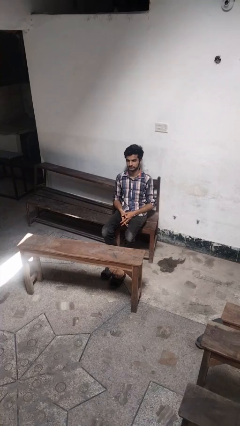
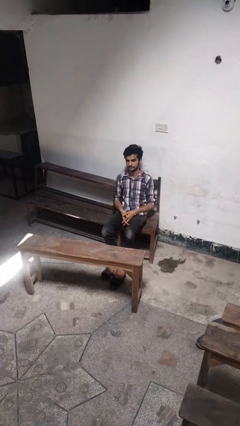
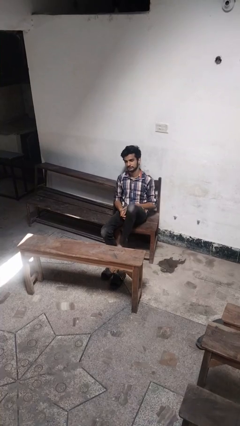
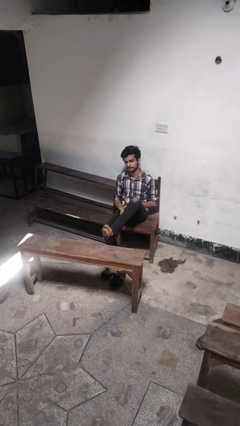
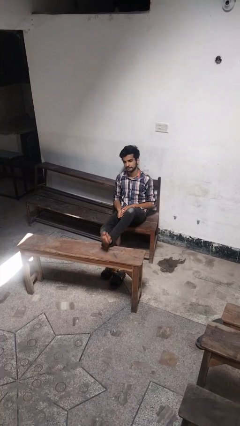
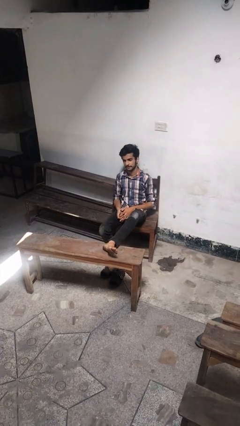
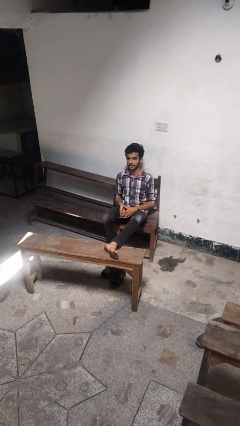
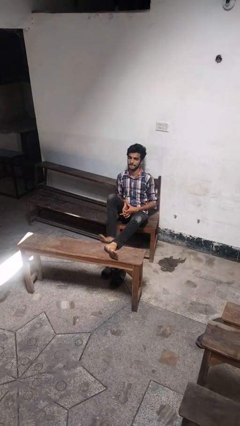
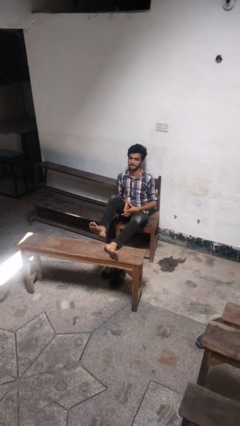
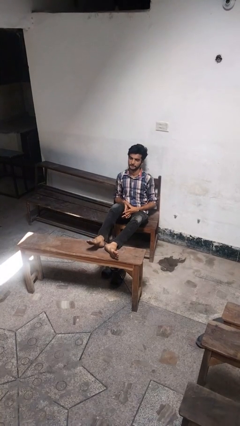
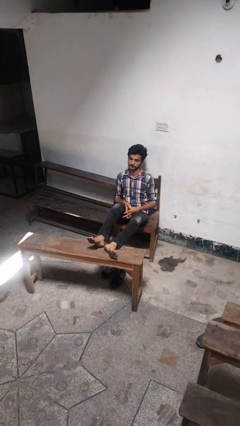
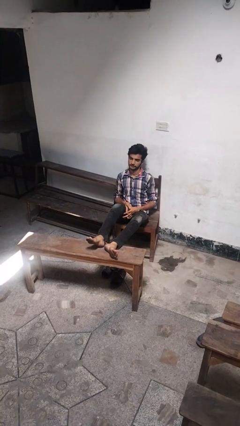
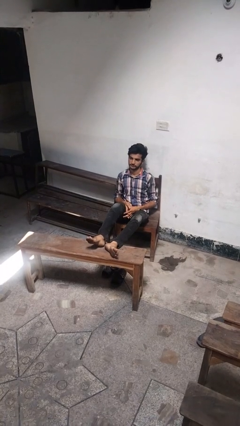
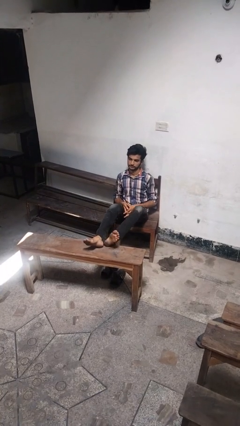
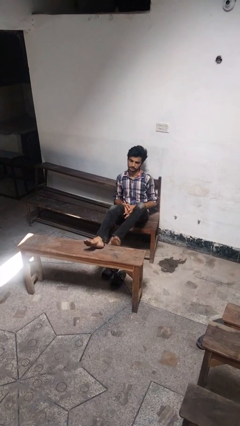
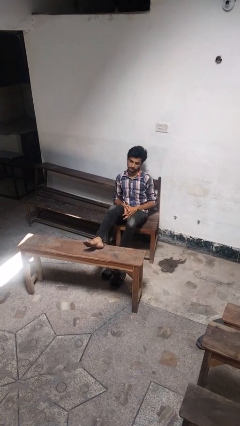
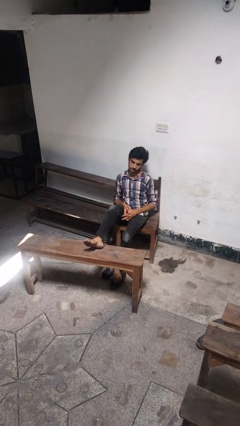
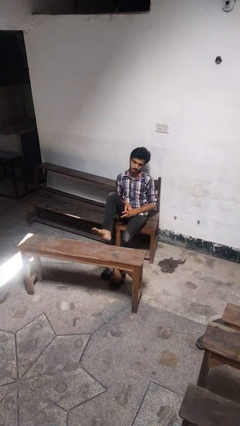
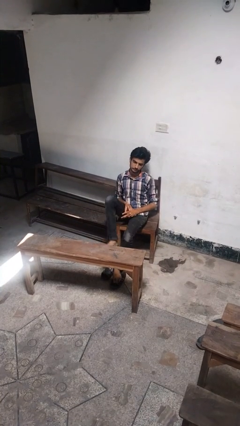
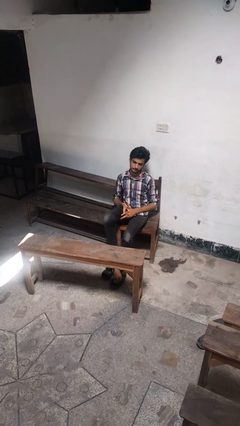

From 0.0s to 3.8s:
person puts feet up

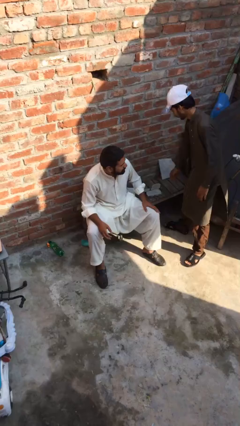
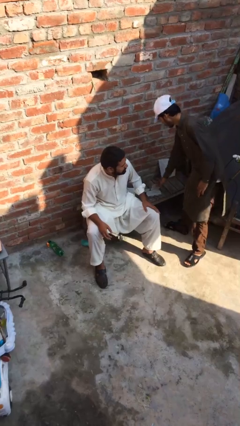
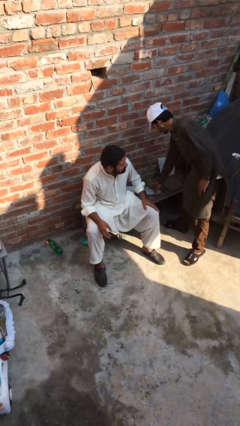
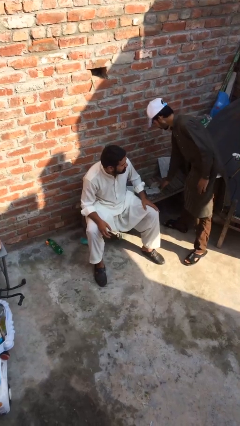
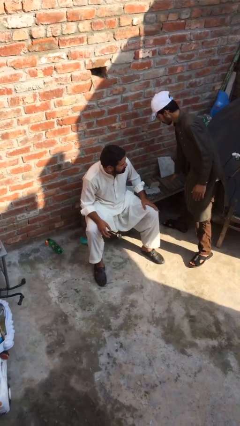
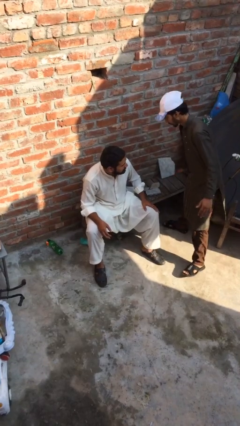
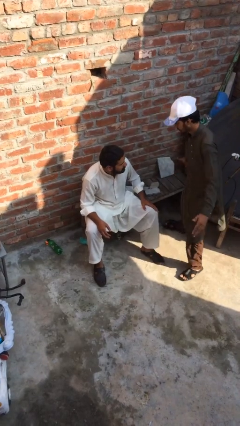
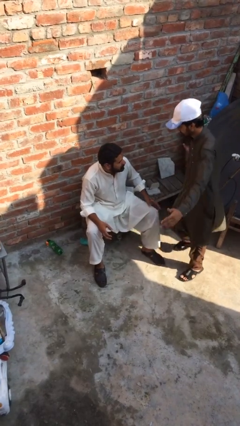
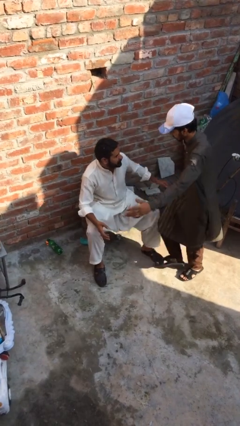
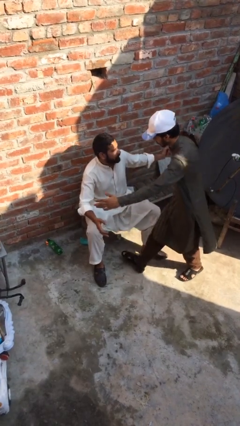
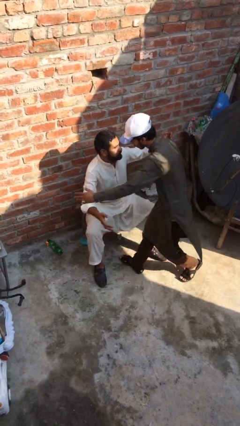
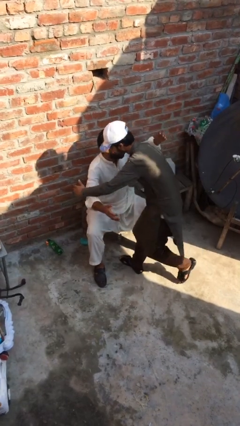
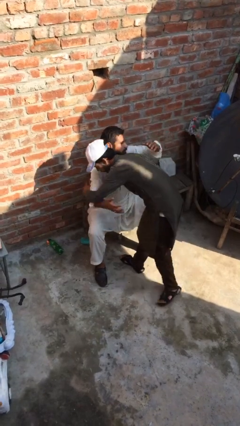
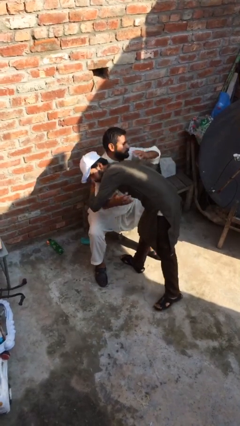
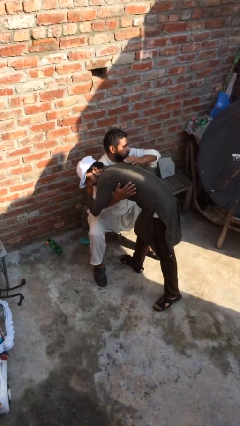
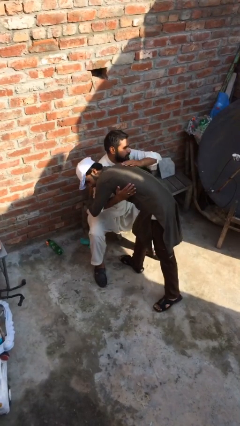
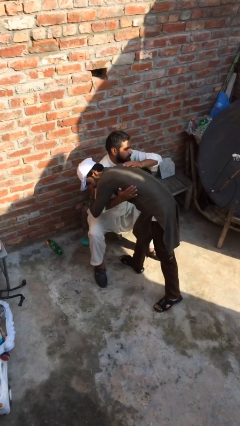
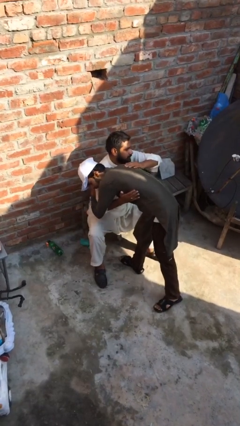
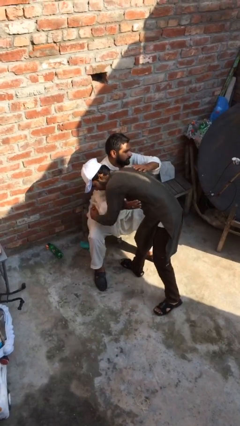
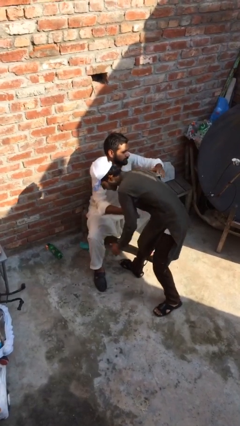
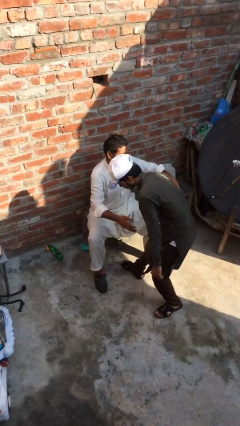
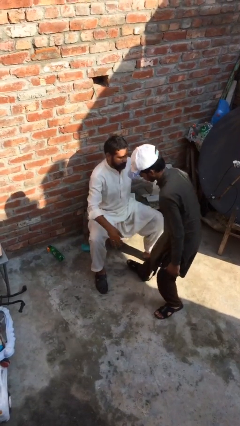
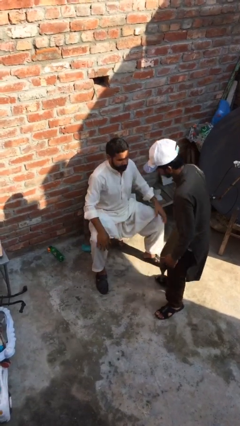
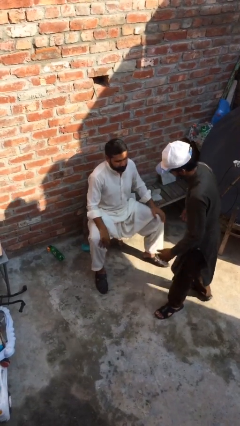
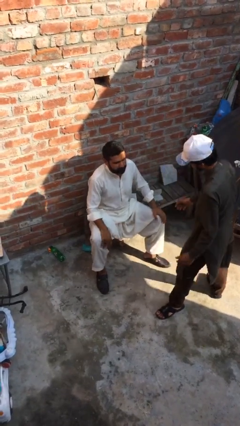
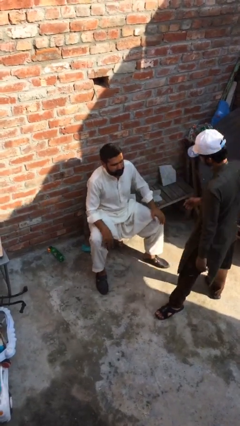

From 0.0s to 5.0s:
person embraces person

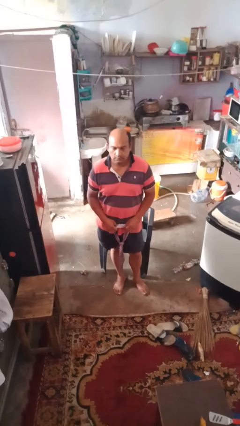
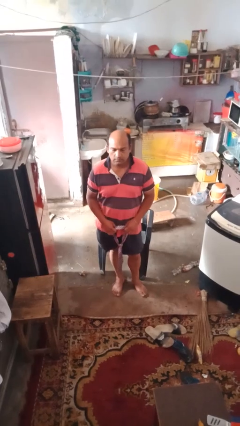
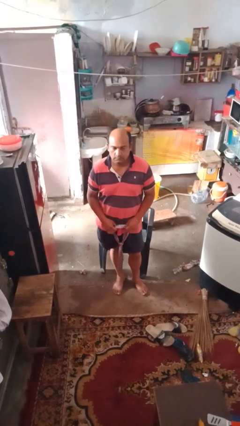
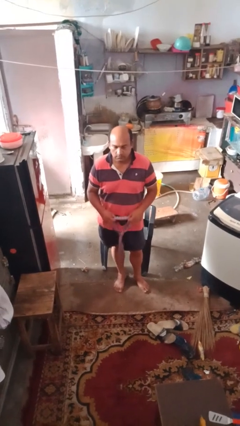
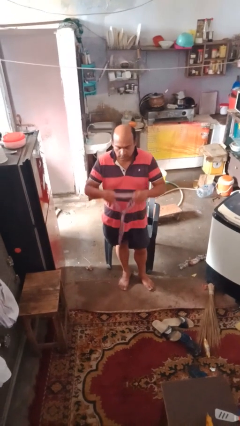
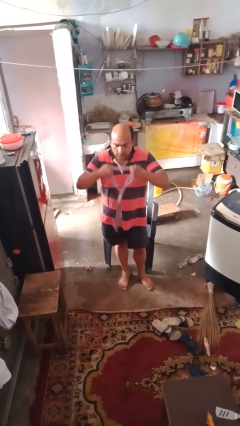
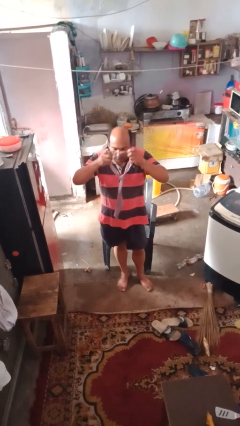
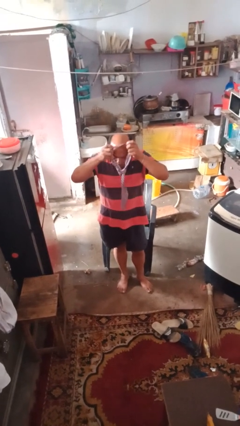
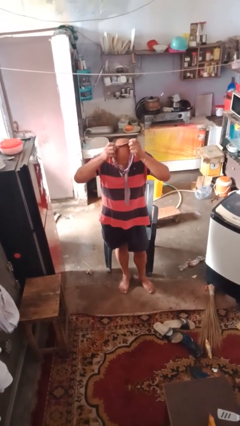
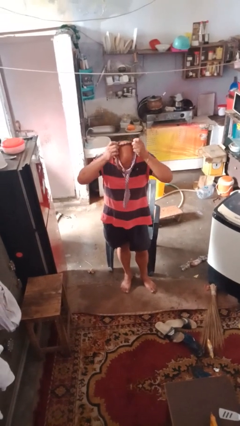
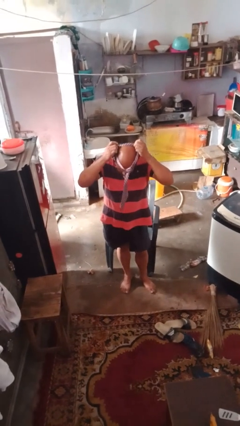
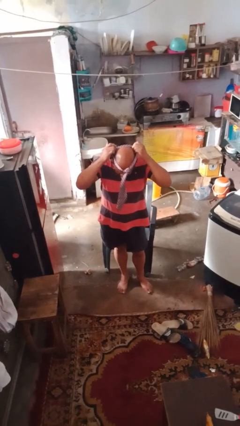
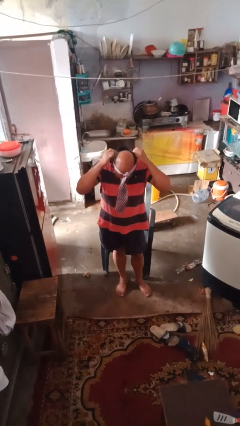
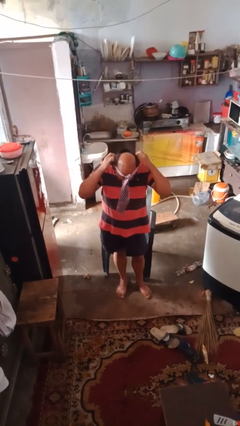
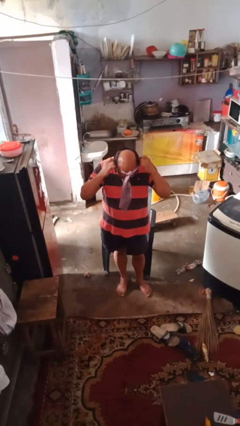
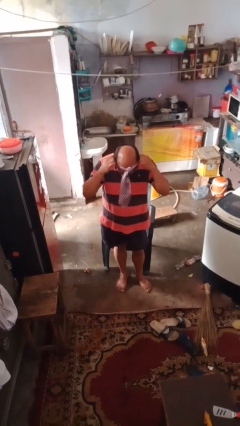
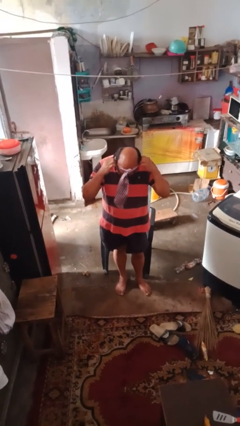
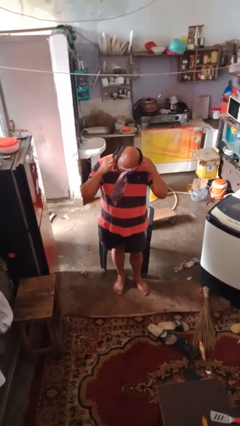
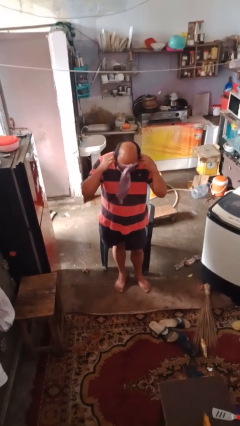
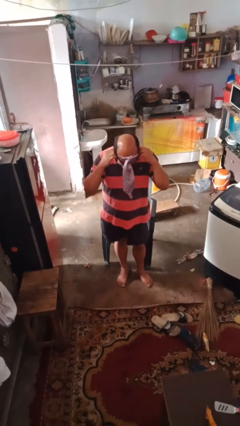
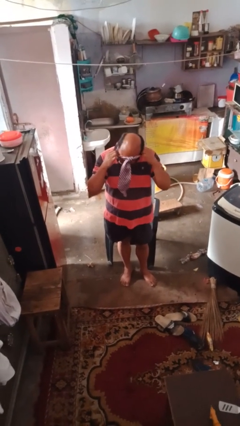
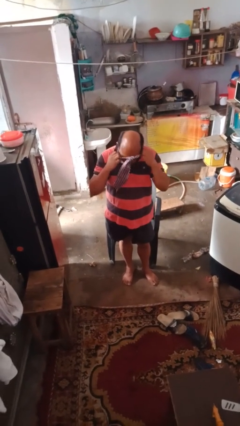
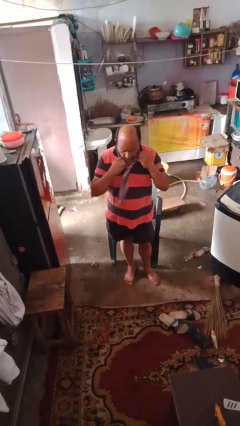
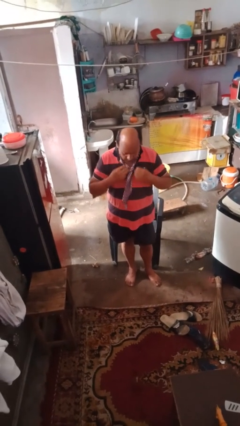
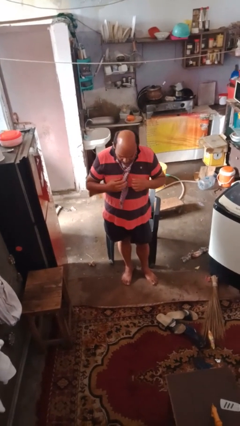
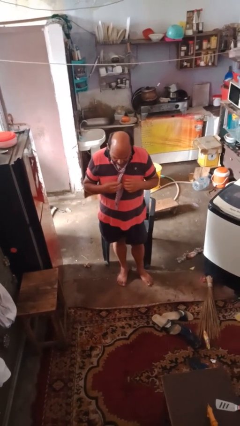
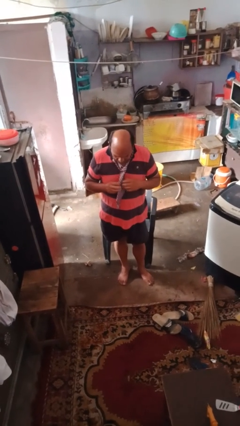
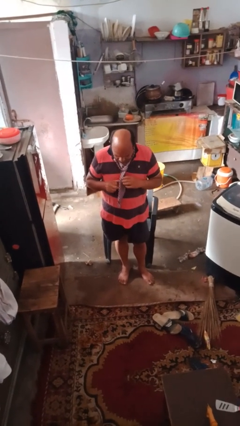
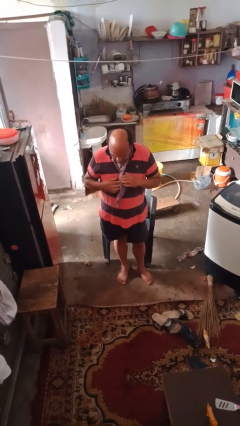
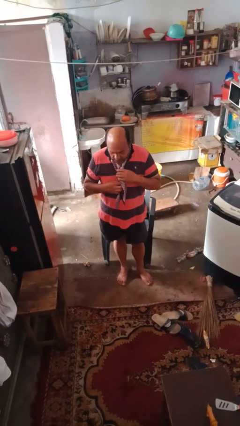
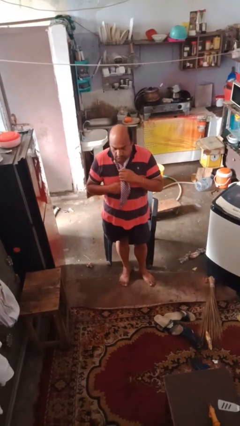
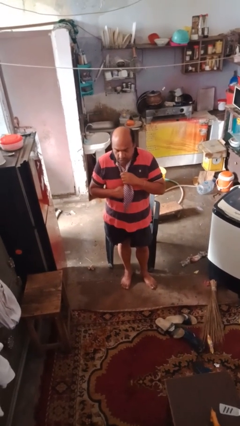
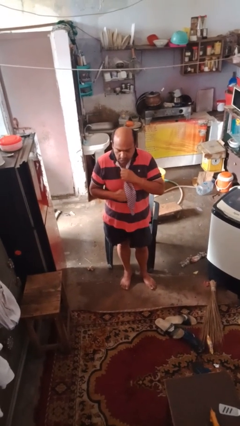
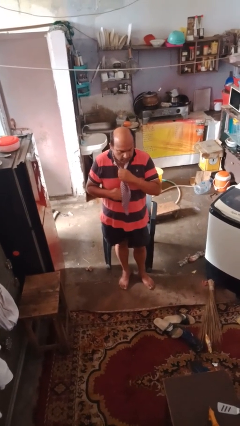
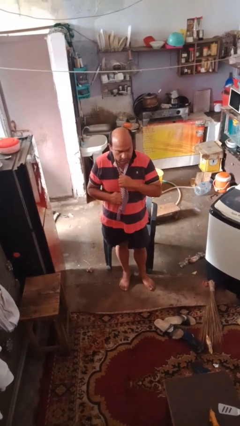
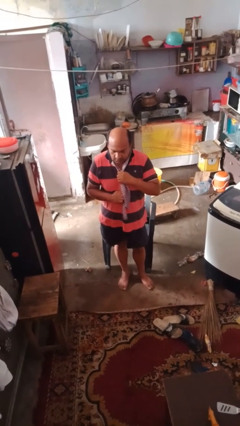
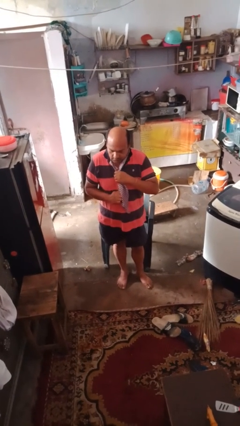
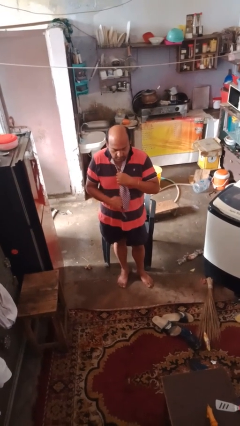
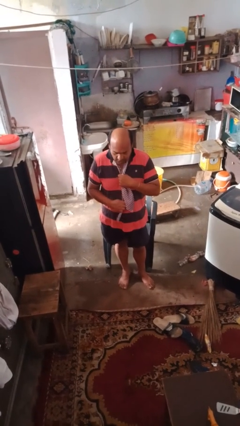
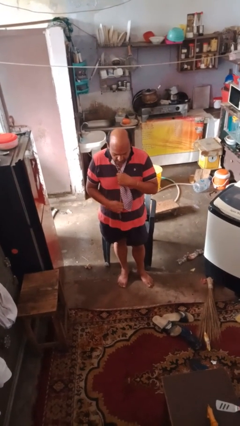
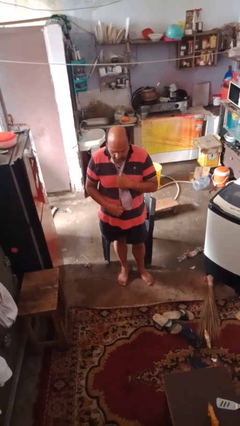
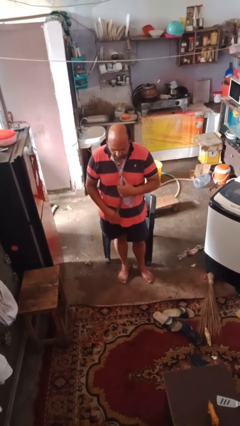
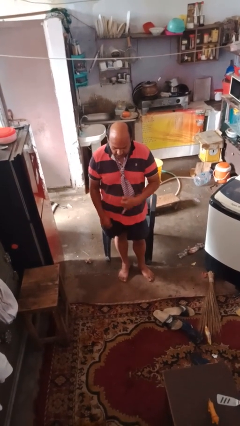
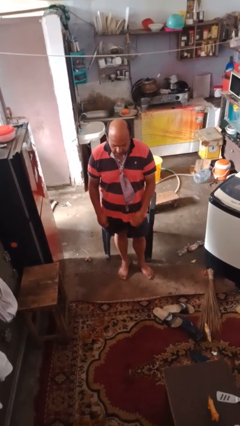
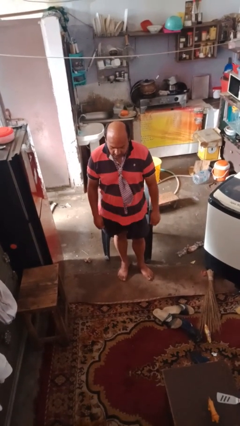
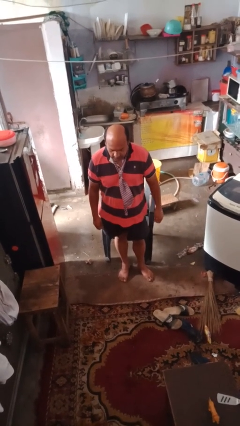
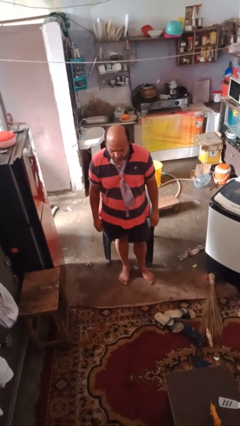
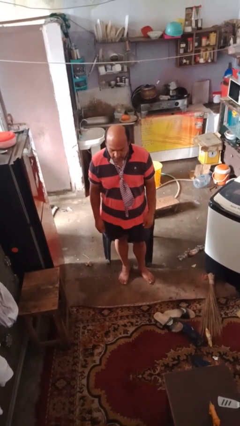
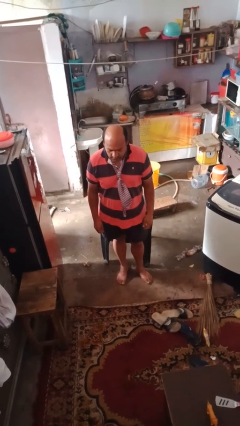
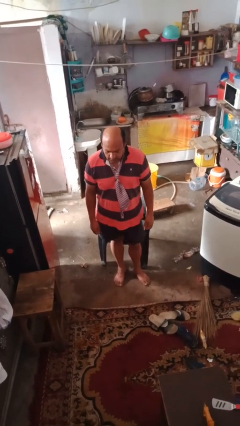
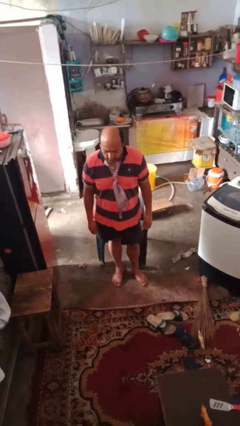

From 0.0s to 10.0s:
person puts on necktie
